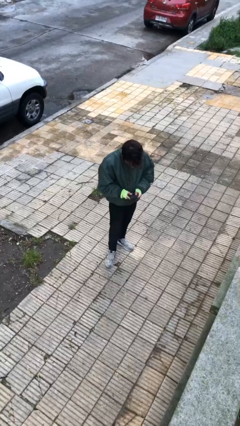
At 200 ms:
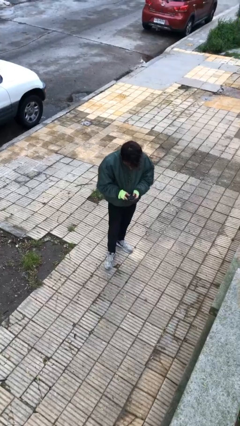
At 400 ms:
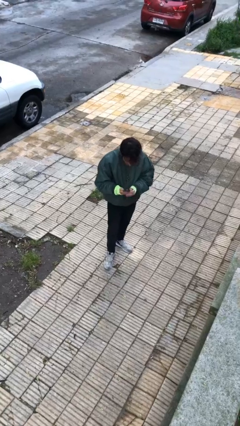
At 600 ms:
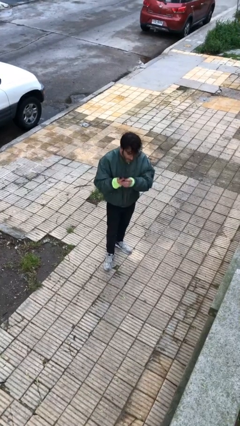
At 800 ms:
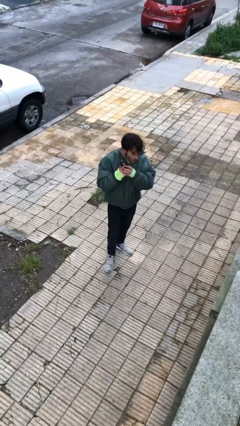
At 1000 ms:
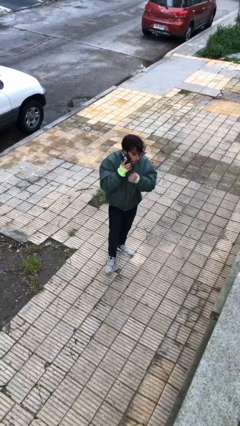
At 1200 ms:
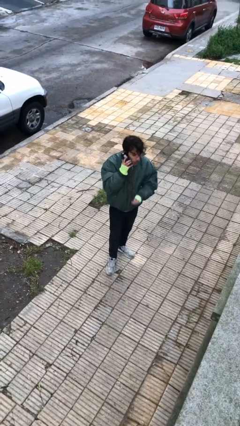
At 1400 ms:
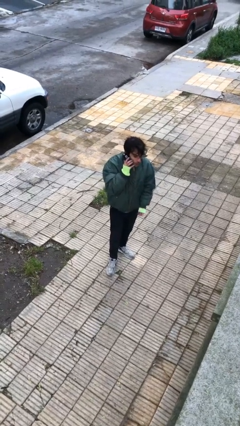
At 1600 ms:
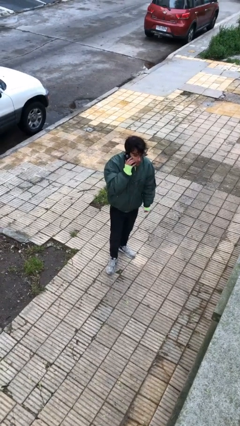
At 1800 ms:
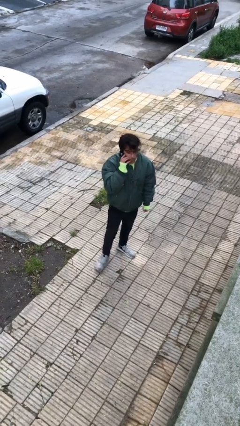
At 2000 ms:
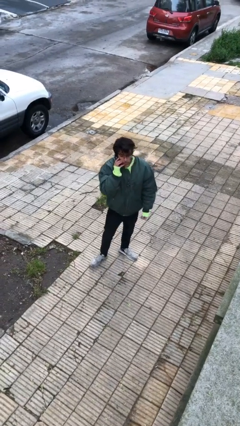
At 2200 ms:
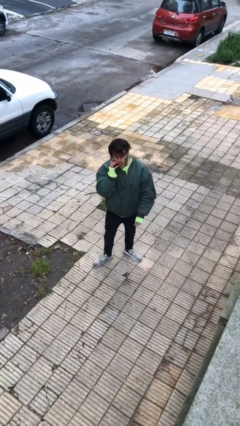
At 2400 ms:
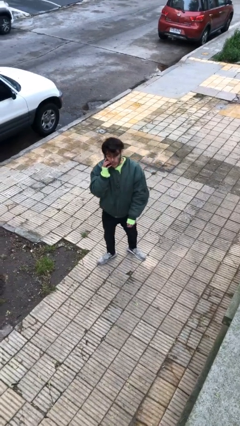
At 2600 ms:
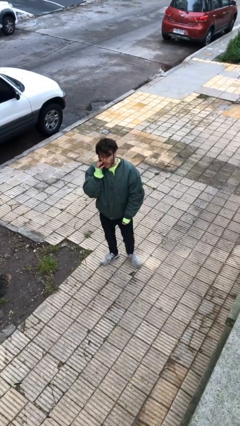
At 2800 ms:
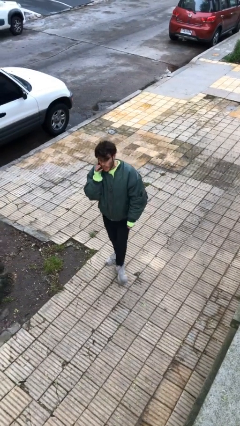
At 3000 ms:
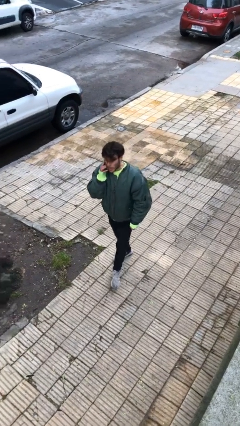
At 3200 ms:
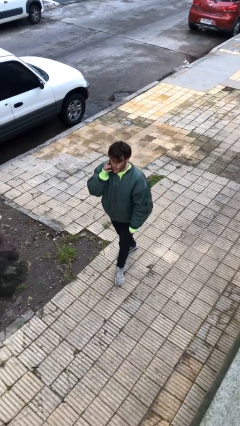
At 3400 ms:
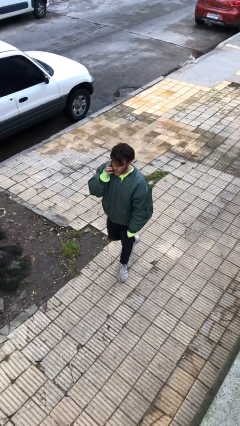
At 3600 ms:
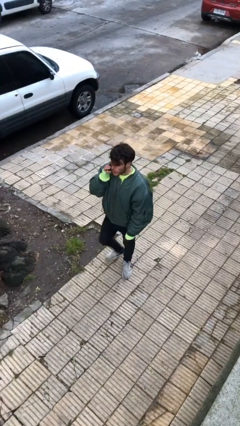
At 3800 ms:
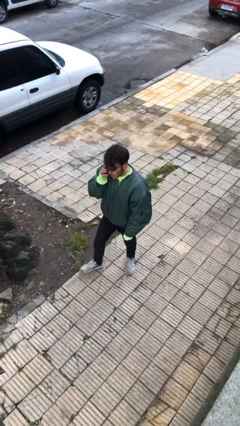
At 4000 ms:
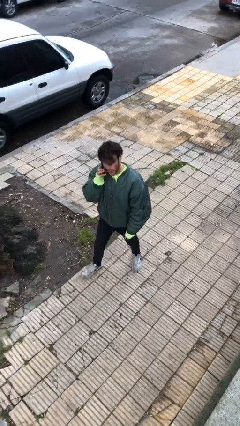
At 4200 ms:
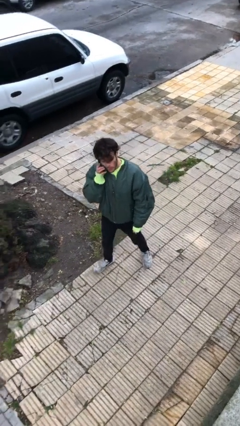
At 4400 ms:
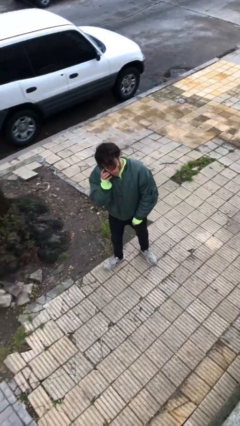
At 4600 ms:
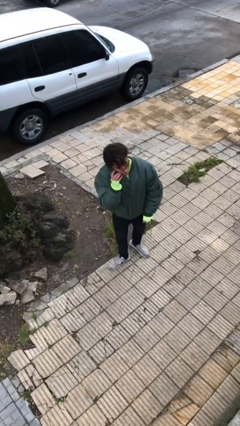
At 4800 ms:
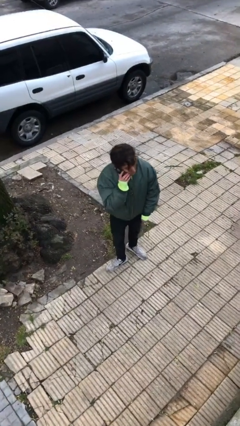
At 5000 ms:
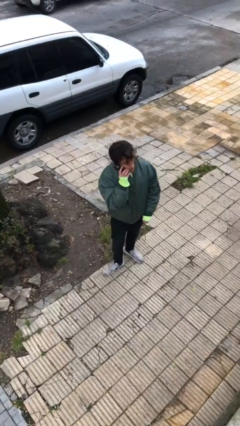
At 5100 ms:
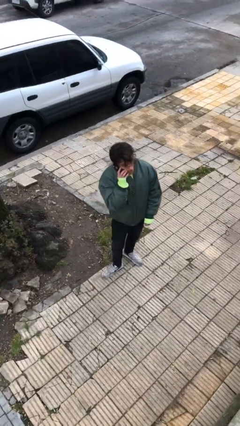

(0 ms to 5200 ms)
person talks on phone

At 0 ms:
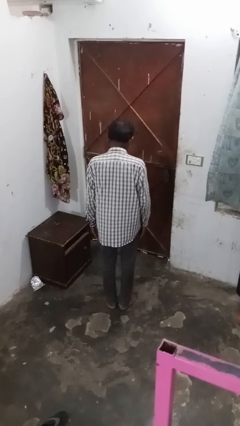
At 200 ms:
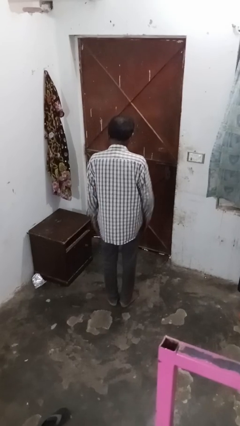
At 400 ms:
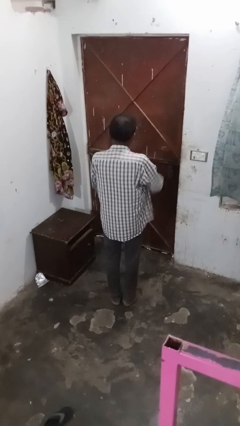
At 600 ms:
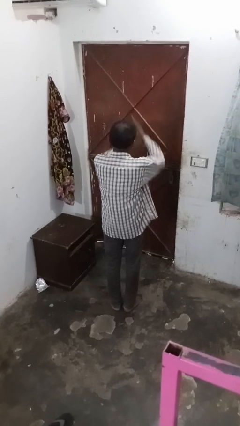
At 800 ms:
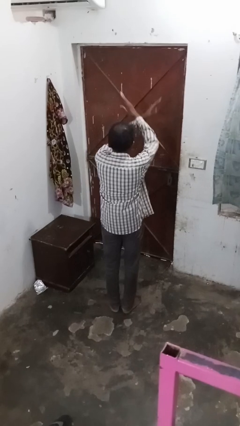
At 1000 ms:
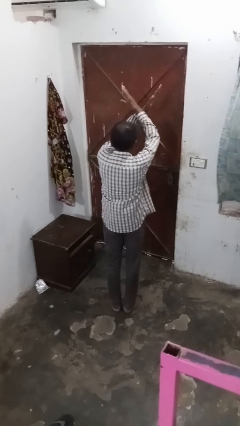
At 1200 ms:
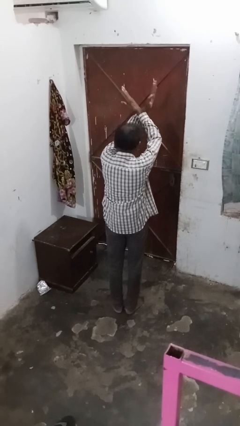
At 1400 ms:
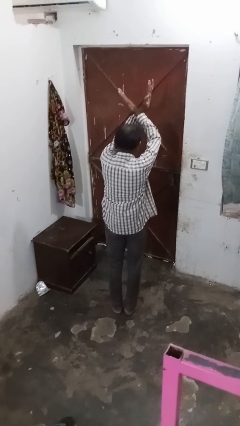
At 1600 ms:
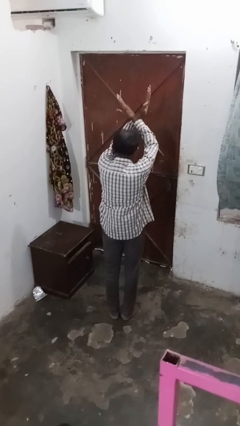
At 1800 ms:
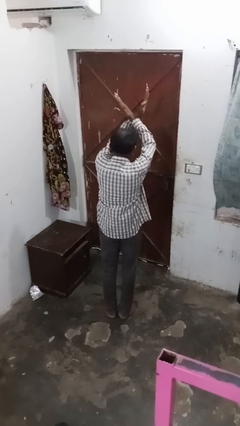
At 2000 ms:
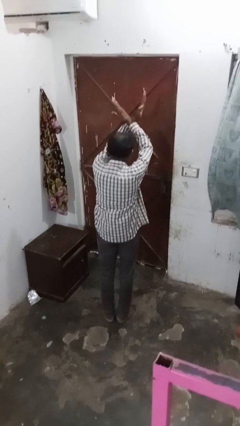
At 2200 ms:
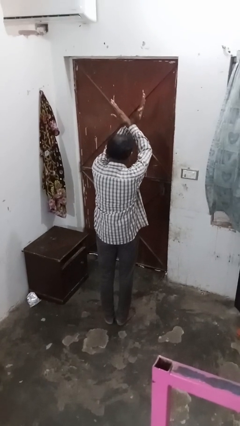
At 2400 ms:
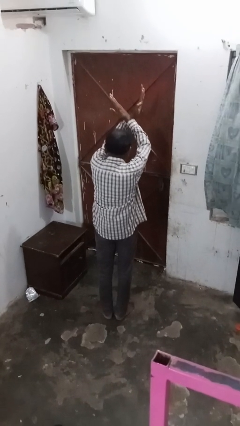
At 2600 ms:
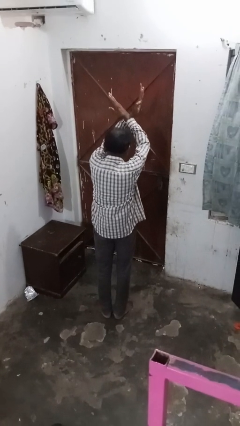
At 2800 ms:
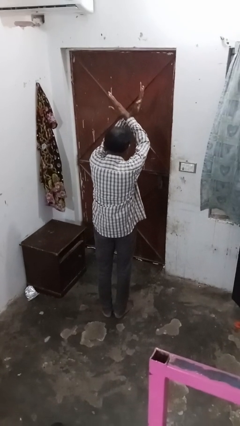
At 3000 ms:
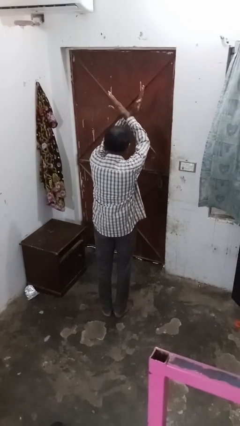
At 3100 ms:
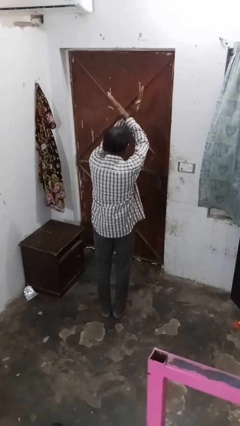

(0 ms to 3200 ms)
person gestures arms x

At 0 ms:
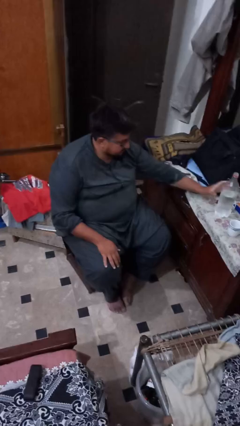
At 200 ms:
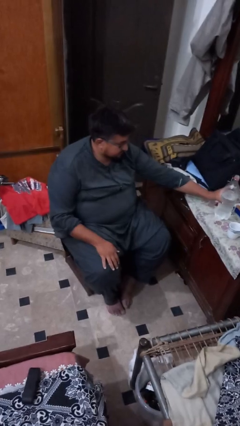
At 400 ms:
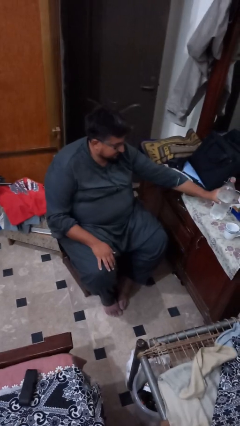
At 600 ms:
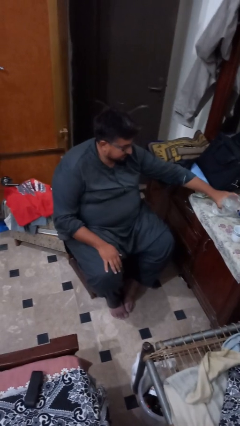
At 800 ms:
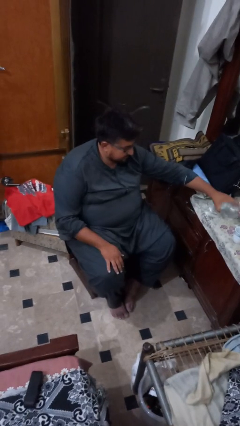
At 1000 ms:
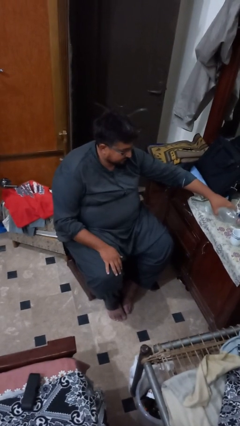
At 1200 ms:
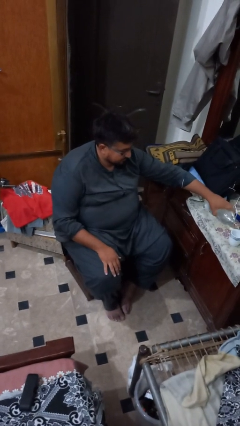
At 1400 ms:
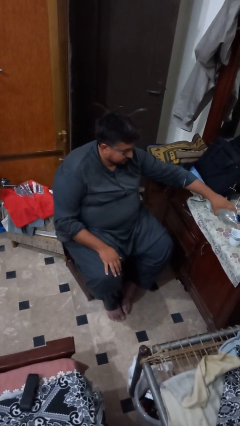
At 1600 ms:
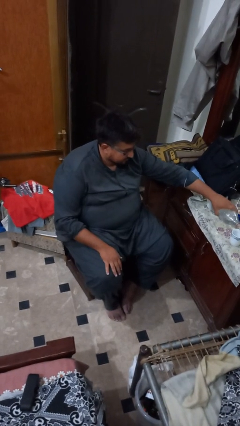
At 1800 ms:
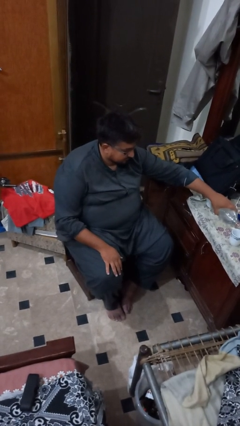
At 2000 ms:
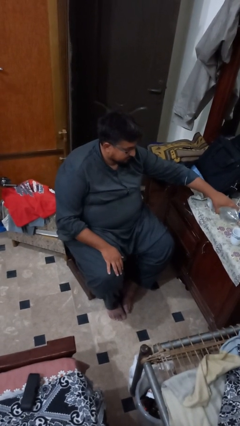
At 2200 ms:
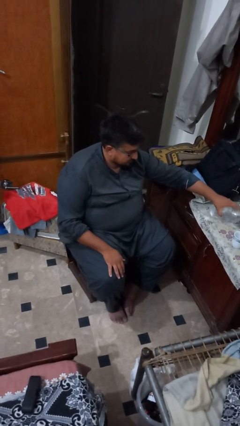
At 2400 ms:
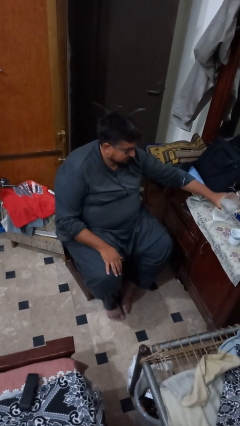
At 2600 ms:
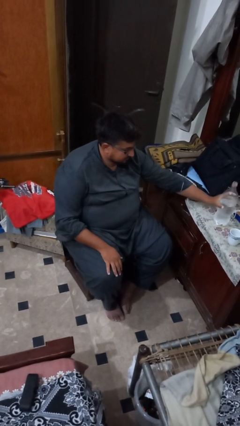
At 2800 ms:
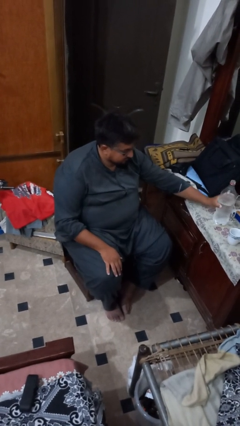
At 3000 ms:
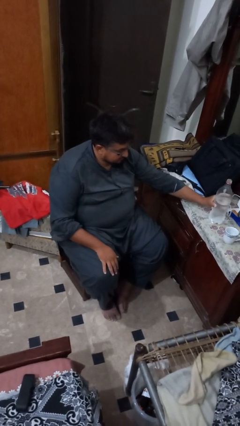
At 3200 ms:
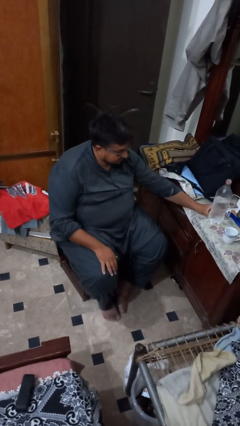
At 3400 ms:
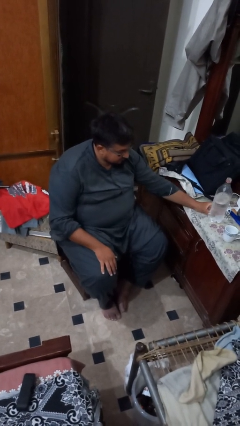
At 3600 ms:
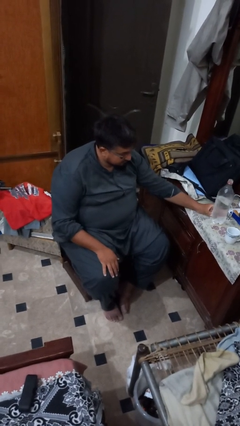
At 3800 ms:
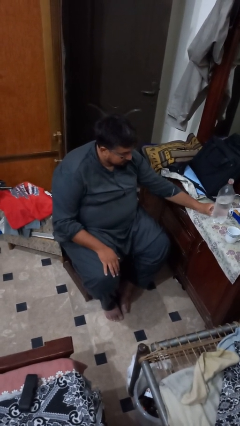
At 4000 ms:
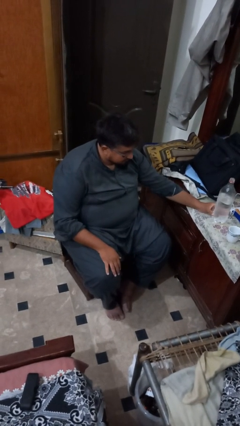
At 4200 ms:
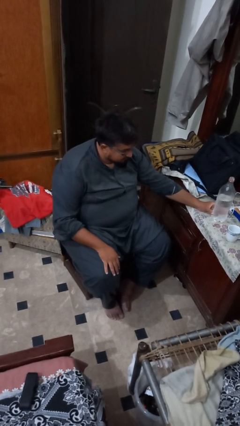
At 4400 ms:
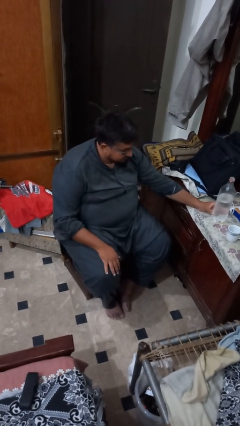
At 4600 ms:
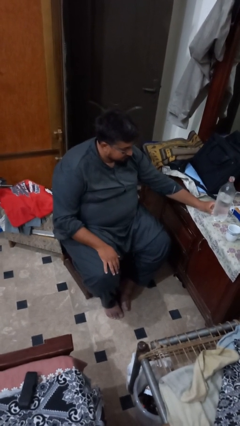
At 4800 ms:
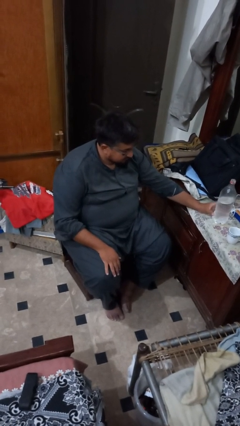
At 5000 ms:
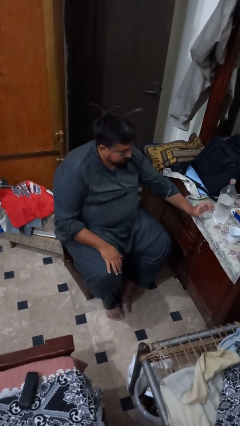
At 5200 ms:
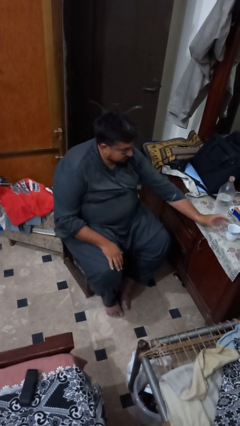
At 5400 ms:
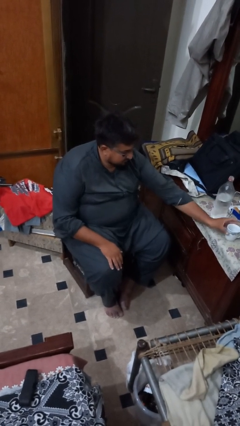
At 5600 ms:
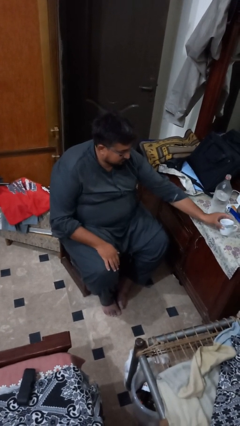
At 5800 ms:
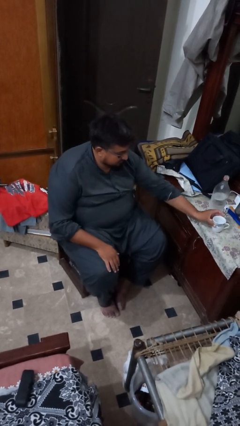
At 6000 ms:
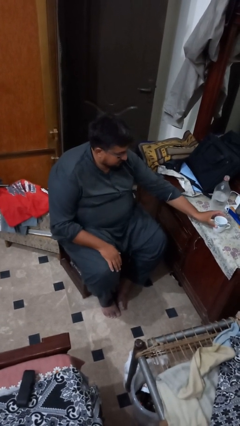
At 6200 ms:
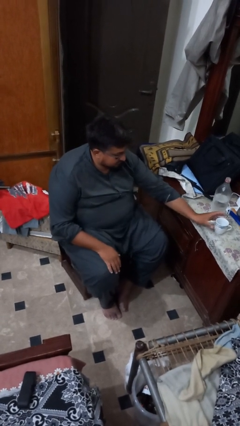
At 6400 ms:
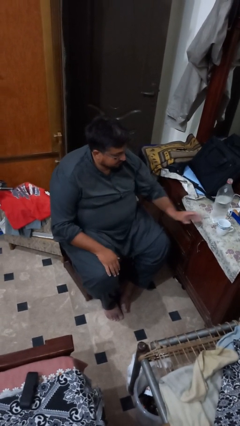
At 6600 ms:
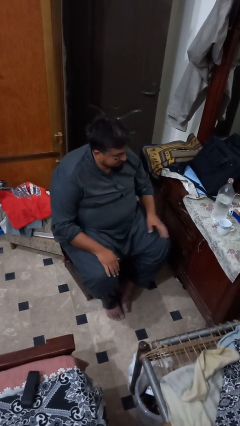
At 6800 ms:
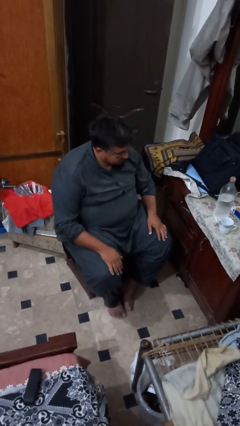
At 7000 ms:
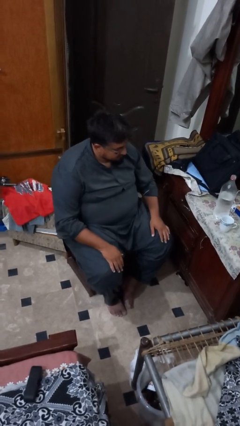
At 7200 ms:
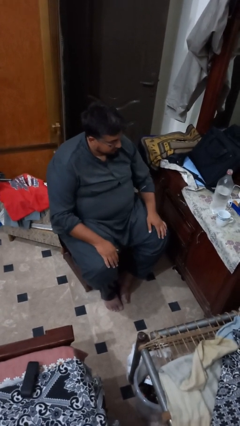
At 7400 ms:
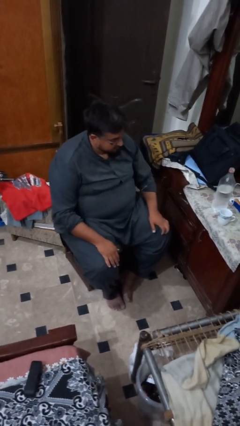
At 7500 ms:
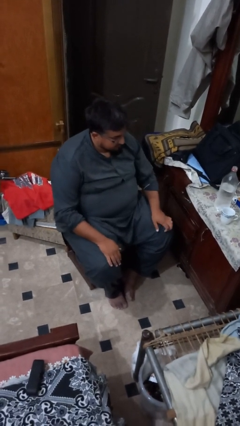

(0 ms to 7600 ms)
person pours liquid into cup

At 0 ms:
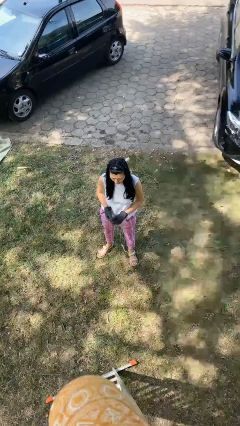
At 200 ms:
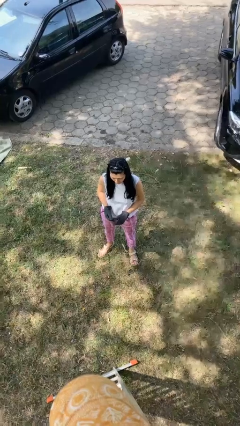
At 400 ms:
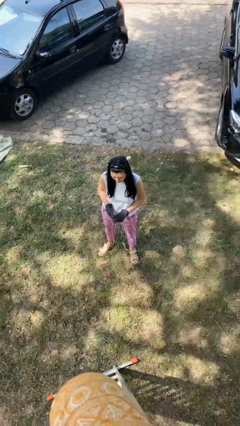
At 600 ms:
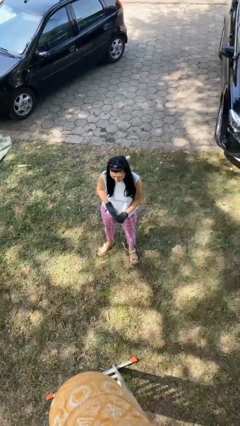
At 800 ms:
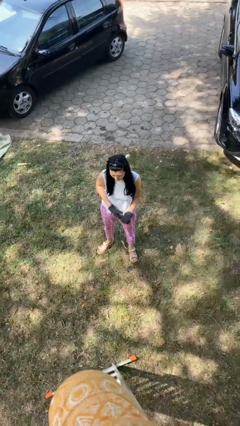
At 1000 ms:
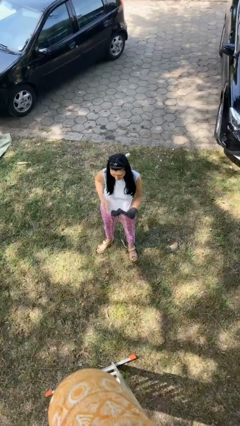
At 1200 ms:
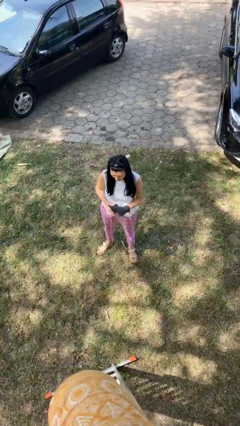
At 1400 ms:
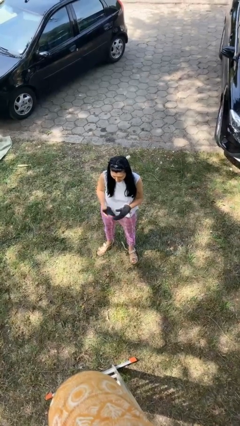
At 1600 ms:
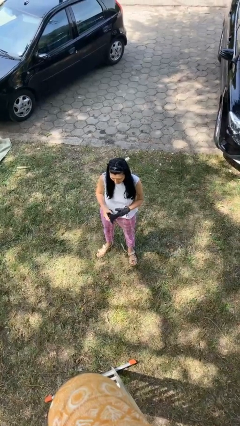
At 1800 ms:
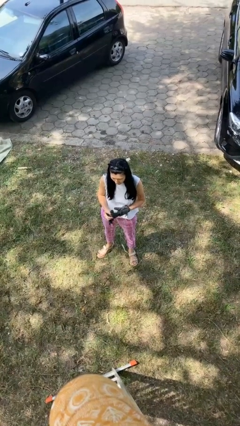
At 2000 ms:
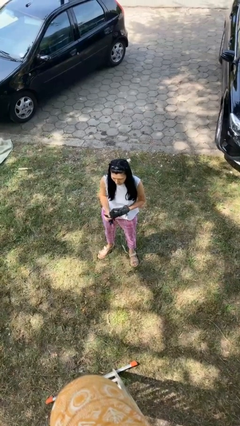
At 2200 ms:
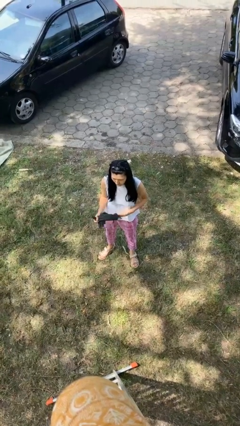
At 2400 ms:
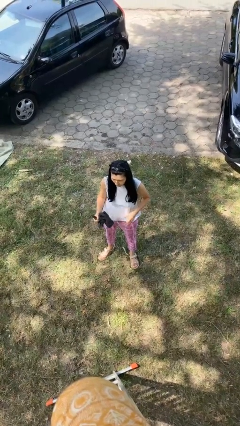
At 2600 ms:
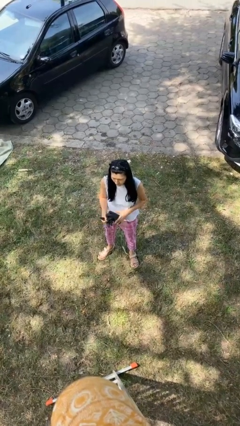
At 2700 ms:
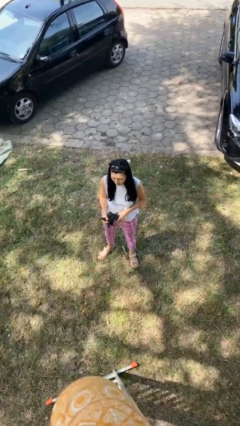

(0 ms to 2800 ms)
person takes off gloves
